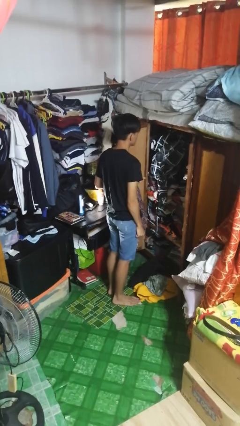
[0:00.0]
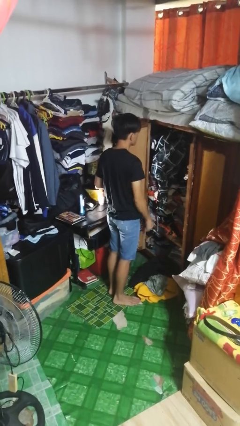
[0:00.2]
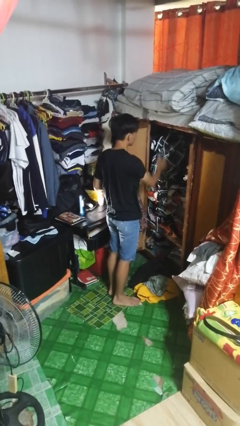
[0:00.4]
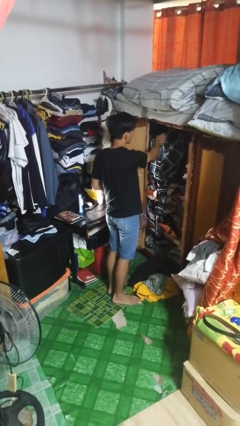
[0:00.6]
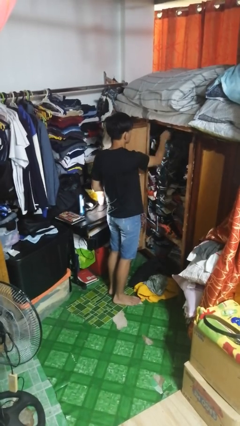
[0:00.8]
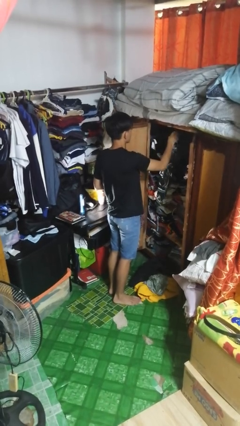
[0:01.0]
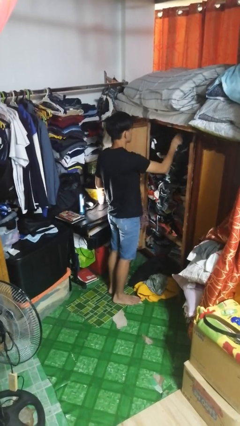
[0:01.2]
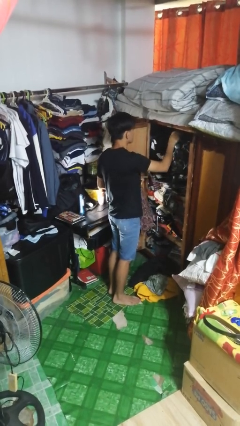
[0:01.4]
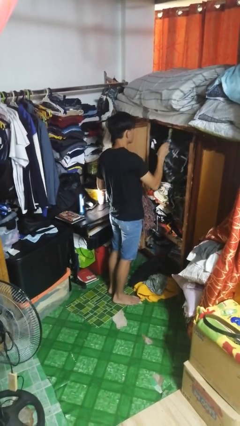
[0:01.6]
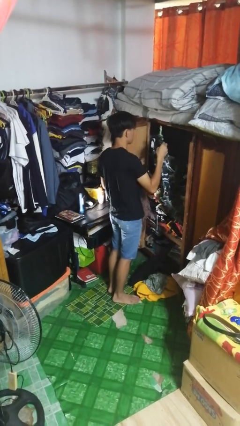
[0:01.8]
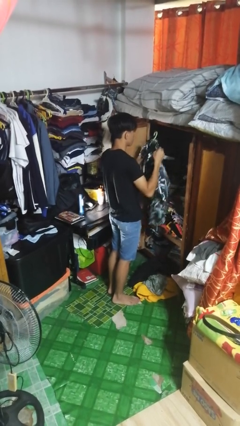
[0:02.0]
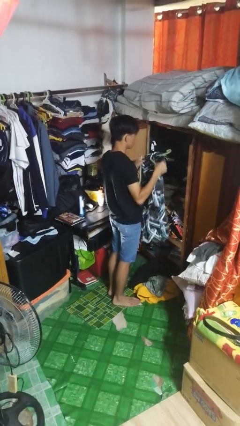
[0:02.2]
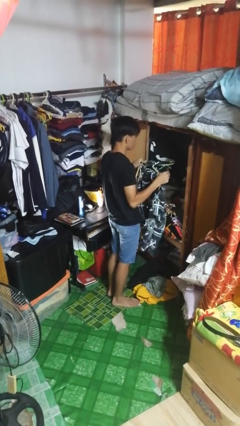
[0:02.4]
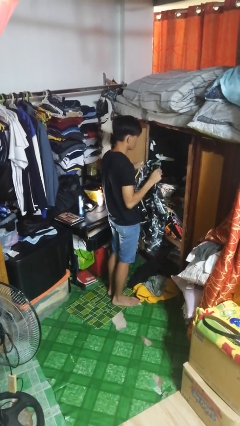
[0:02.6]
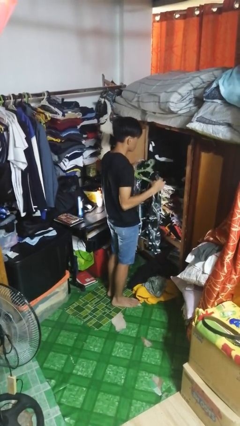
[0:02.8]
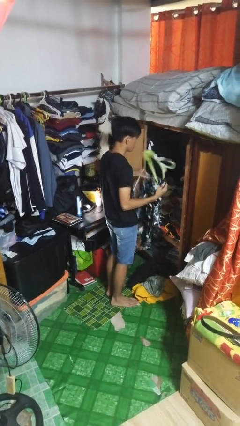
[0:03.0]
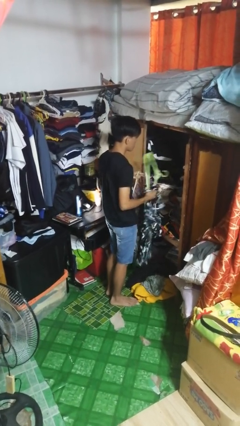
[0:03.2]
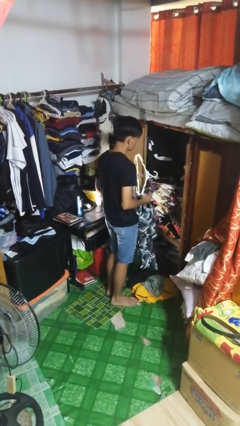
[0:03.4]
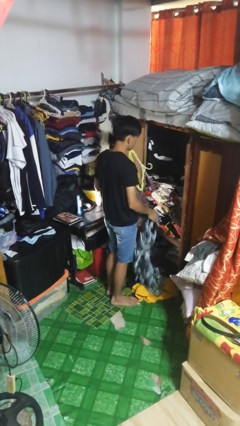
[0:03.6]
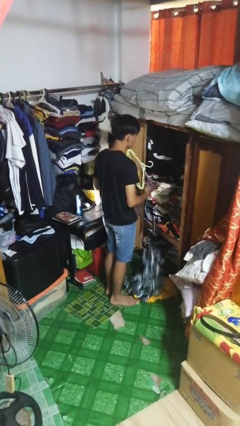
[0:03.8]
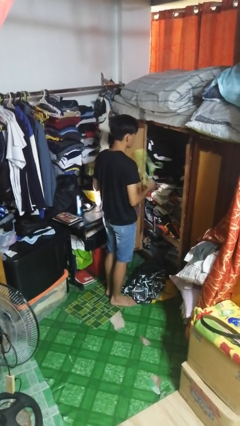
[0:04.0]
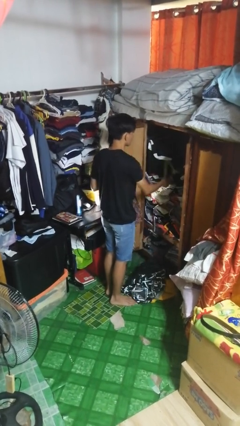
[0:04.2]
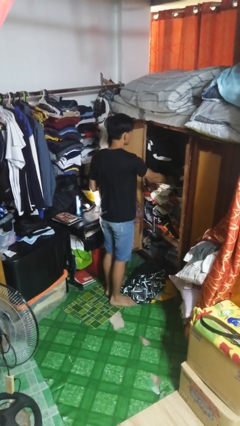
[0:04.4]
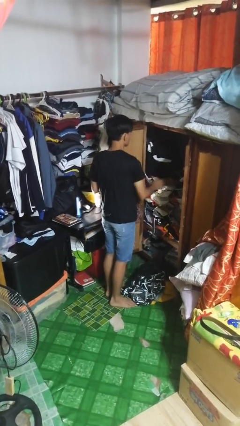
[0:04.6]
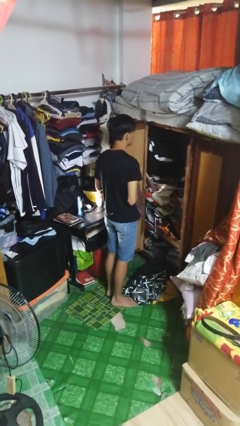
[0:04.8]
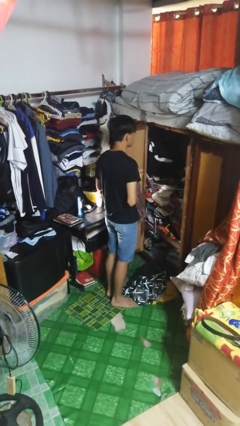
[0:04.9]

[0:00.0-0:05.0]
person takes clothes from closet

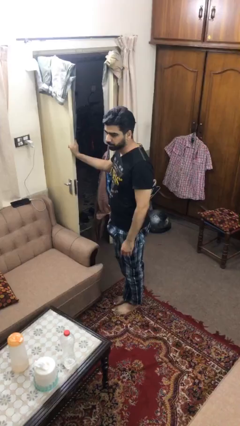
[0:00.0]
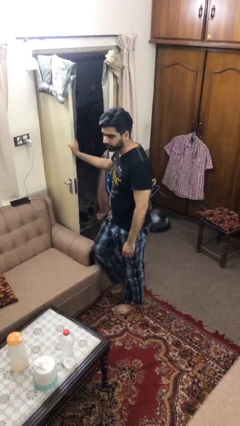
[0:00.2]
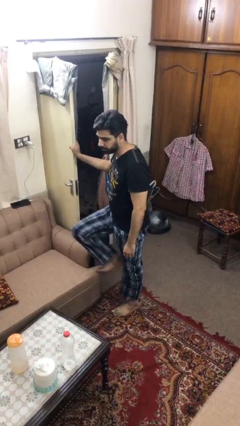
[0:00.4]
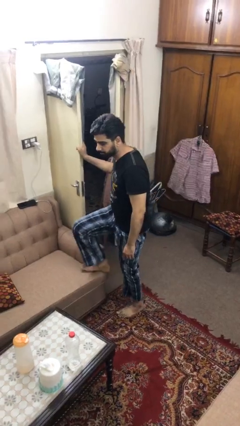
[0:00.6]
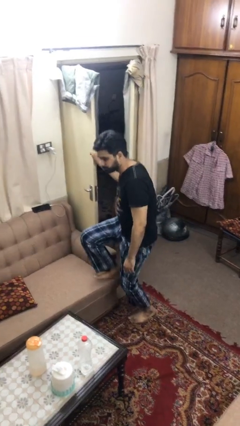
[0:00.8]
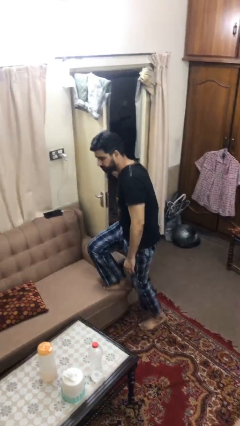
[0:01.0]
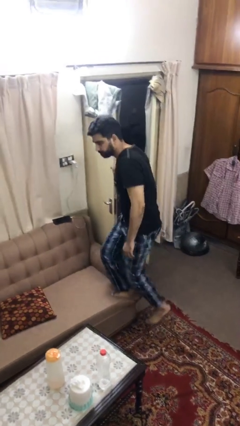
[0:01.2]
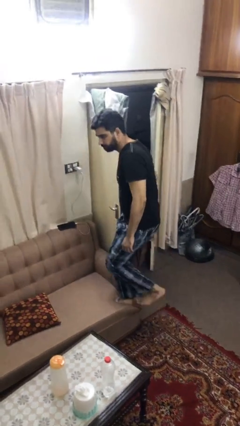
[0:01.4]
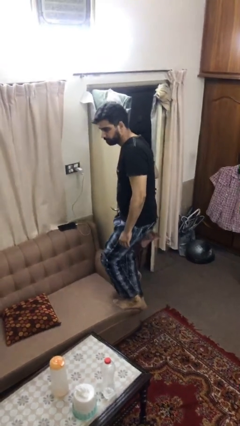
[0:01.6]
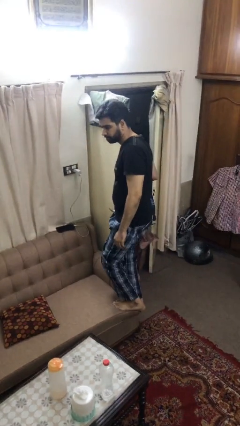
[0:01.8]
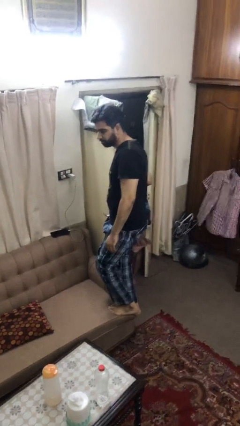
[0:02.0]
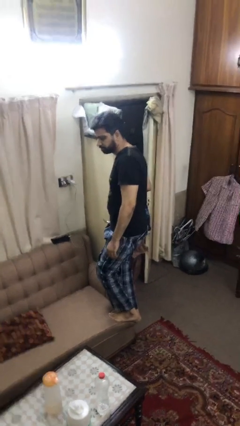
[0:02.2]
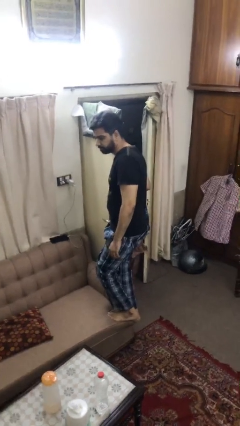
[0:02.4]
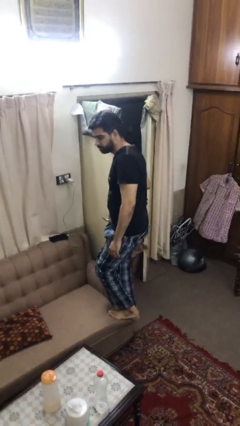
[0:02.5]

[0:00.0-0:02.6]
person climbs on couch

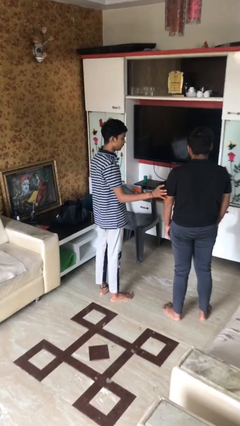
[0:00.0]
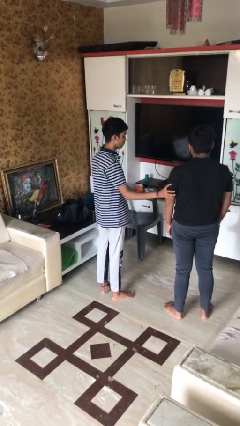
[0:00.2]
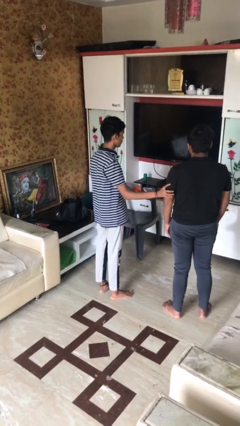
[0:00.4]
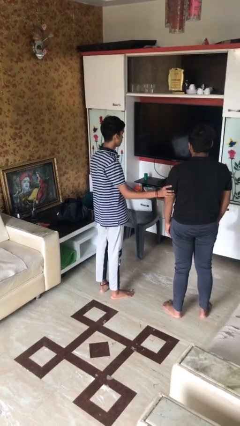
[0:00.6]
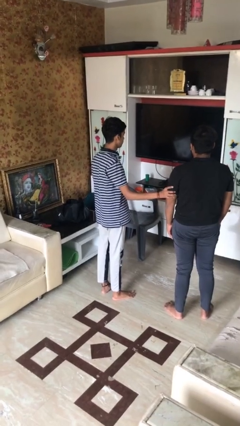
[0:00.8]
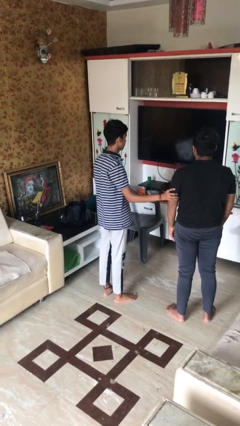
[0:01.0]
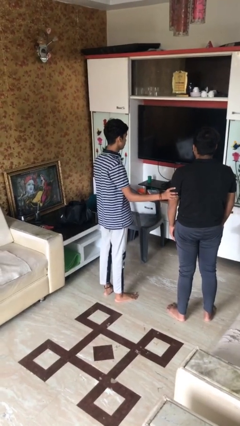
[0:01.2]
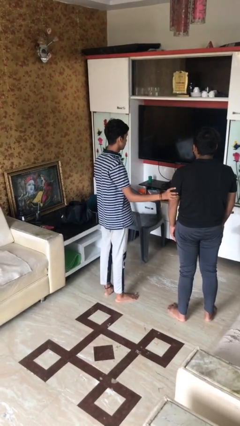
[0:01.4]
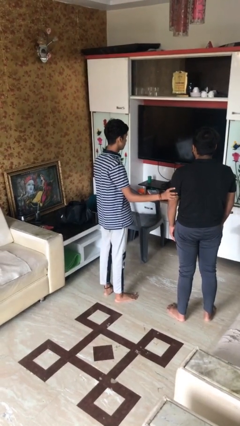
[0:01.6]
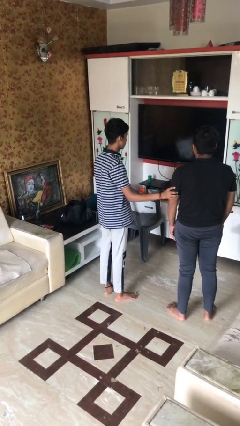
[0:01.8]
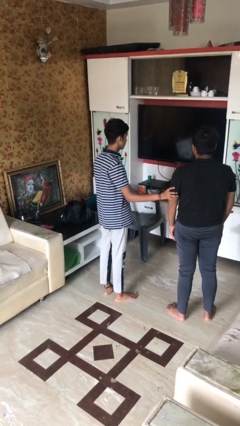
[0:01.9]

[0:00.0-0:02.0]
person grabs person by bicep

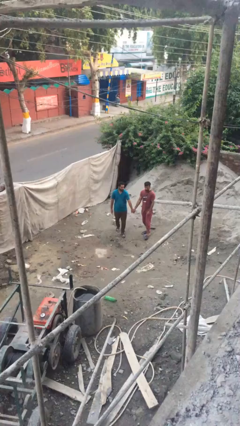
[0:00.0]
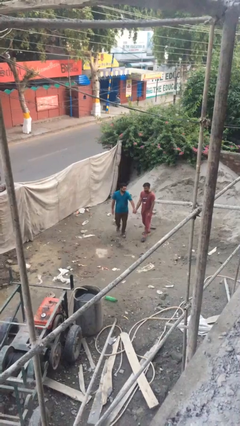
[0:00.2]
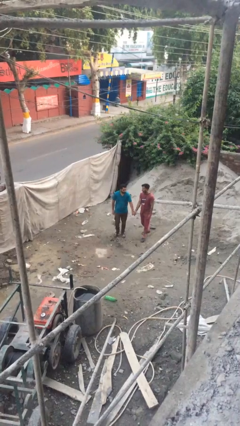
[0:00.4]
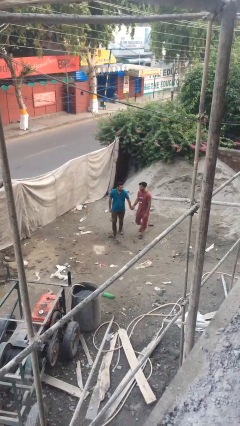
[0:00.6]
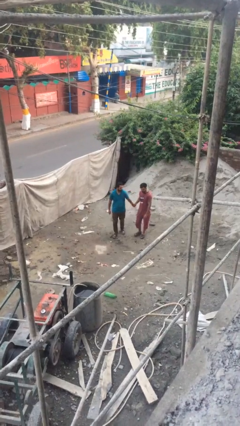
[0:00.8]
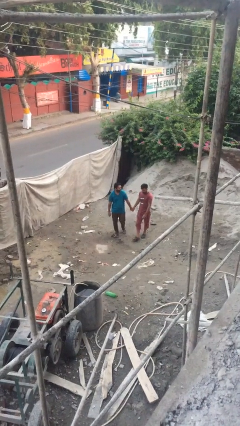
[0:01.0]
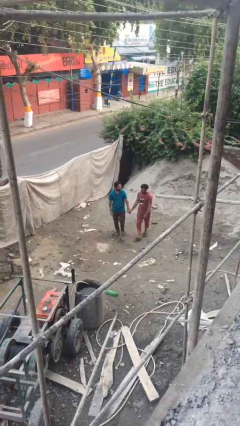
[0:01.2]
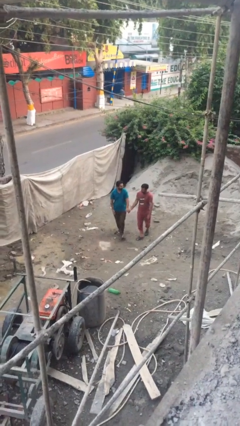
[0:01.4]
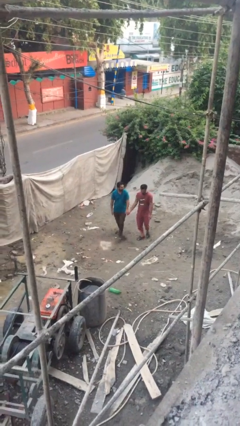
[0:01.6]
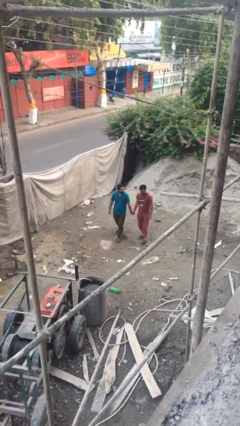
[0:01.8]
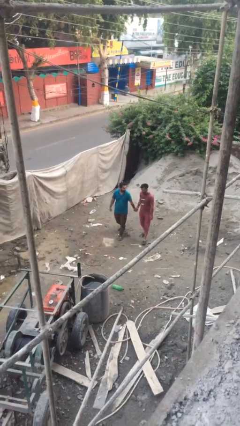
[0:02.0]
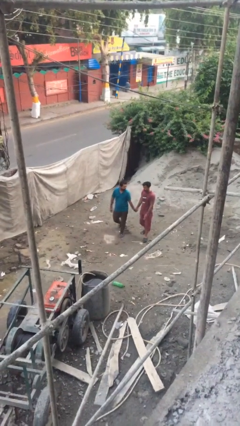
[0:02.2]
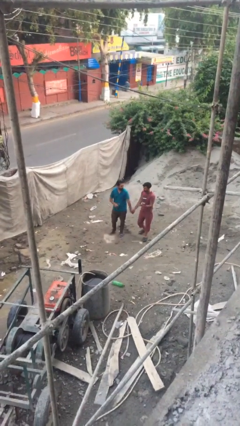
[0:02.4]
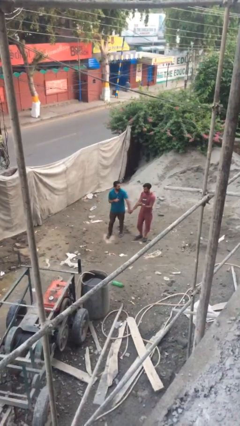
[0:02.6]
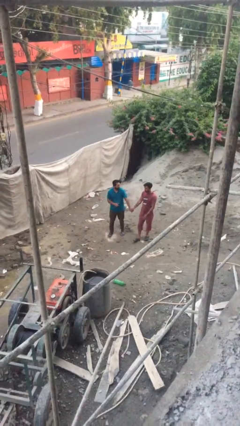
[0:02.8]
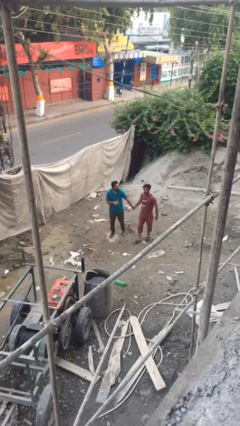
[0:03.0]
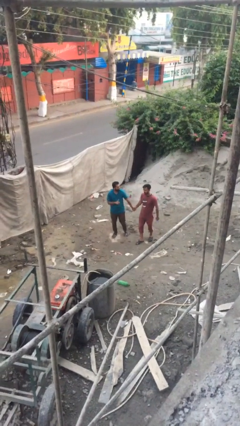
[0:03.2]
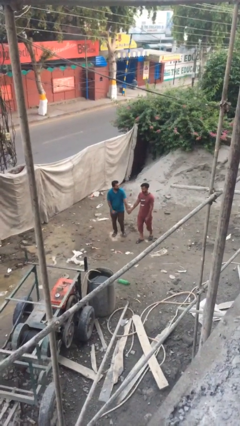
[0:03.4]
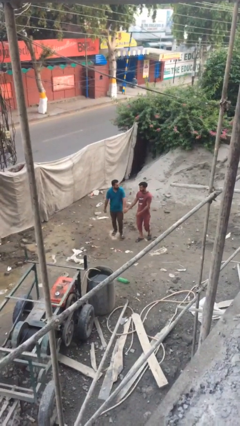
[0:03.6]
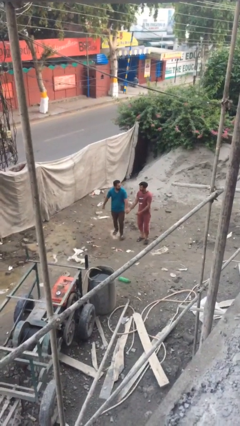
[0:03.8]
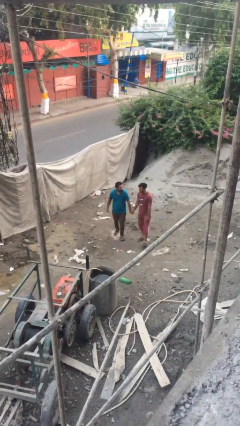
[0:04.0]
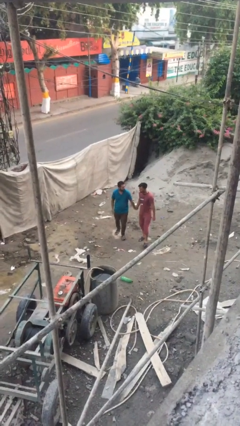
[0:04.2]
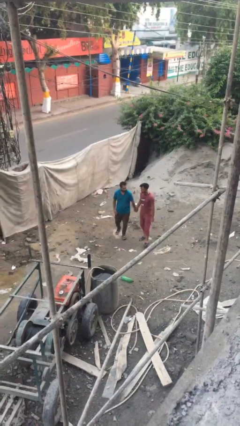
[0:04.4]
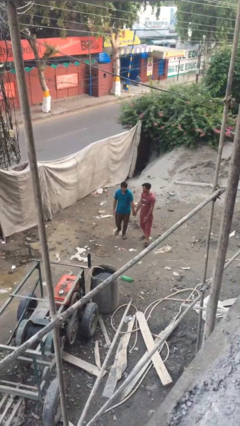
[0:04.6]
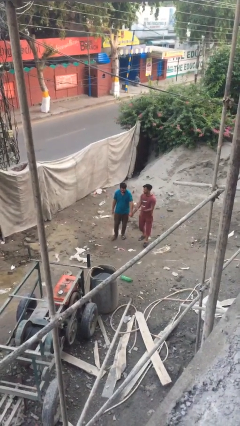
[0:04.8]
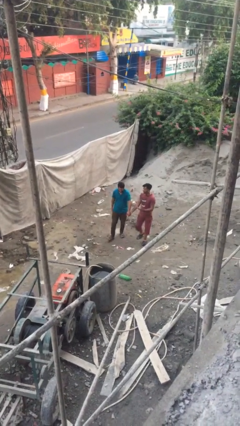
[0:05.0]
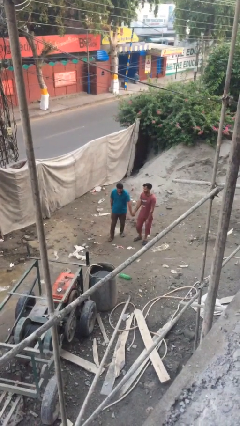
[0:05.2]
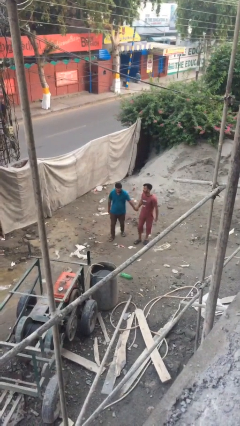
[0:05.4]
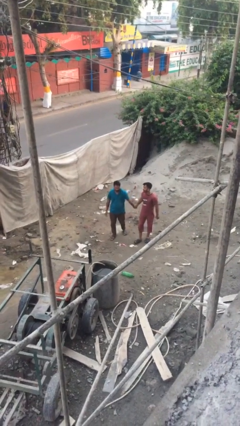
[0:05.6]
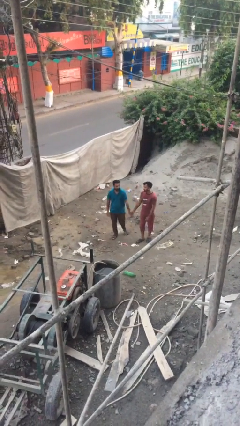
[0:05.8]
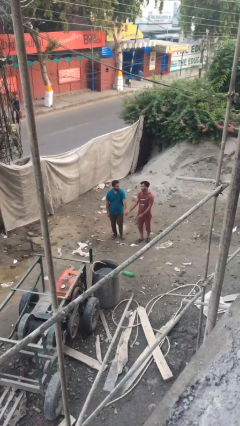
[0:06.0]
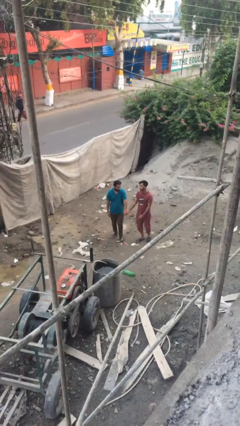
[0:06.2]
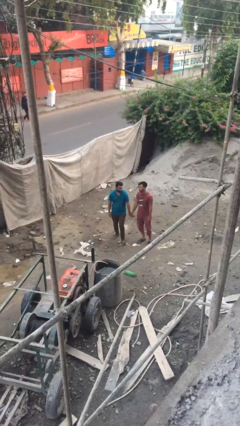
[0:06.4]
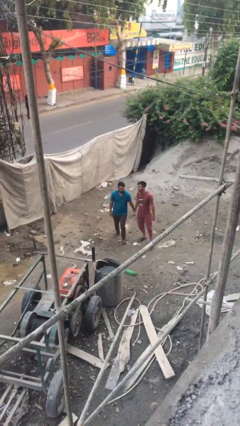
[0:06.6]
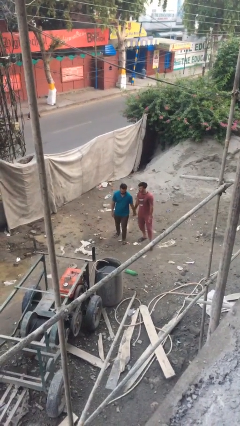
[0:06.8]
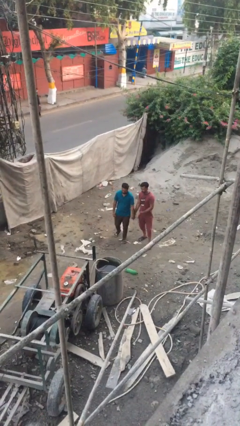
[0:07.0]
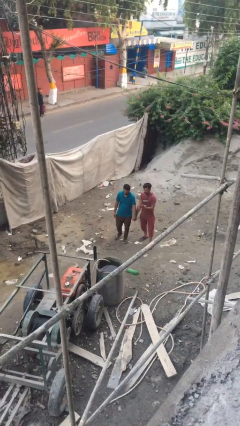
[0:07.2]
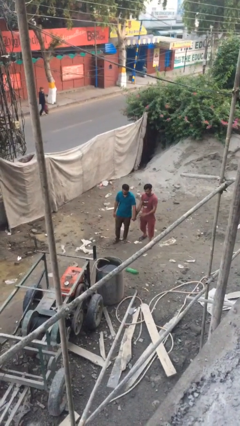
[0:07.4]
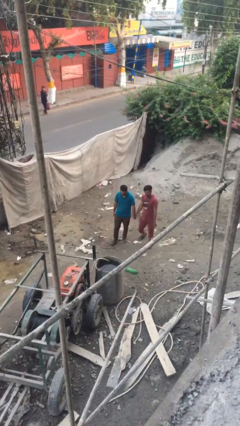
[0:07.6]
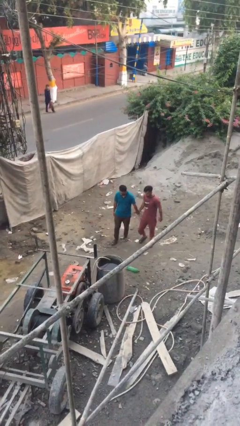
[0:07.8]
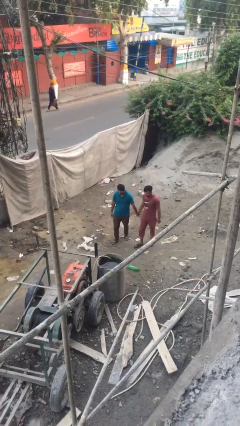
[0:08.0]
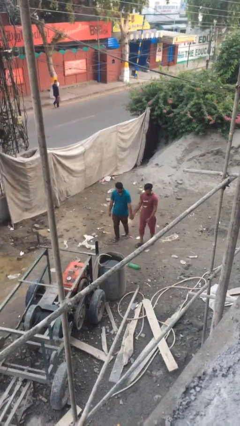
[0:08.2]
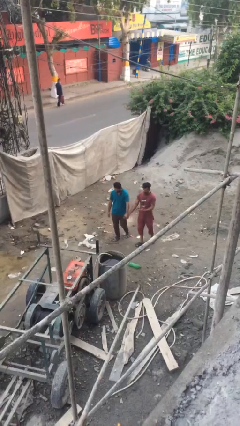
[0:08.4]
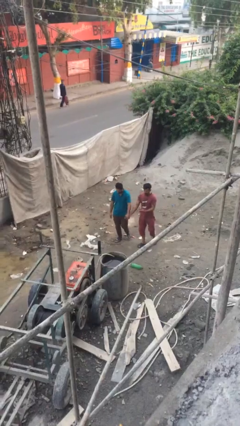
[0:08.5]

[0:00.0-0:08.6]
person holds hand
